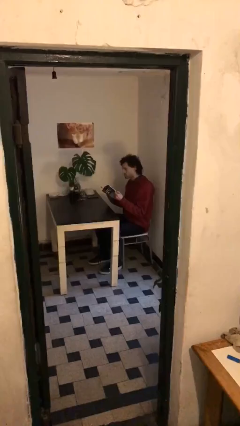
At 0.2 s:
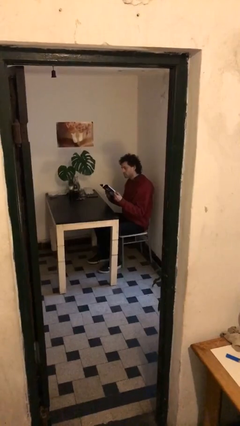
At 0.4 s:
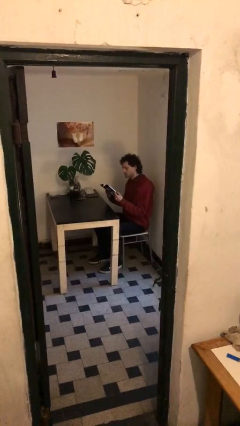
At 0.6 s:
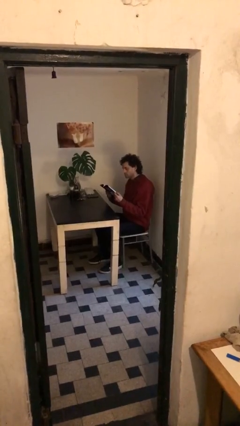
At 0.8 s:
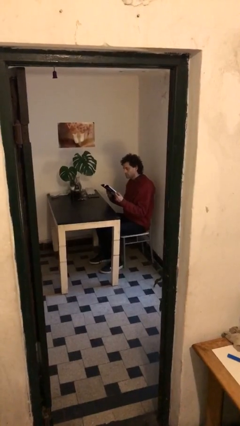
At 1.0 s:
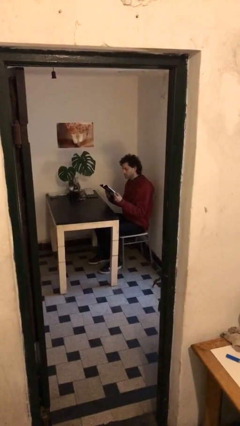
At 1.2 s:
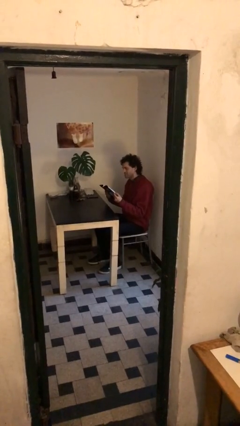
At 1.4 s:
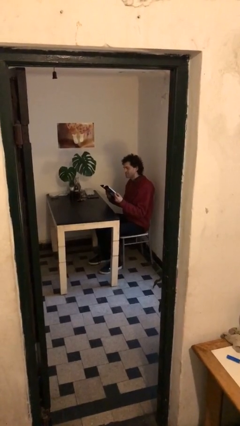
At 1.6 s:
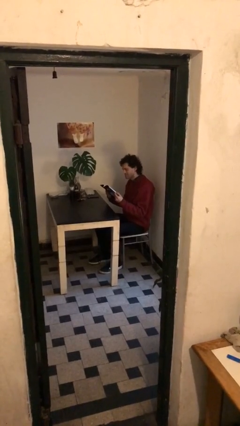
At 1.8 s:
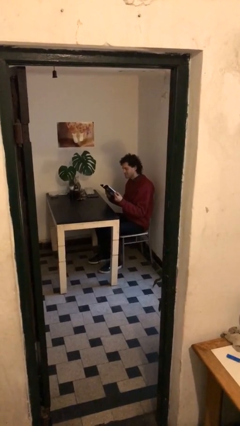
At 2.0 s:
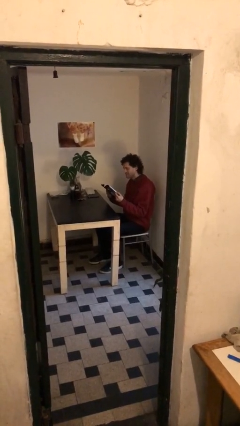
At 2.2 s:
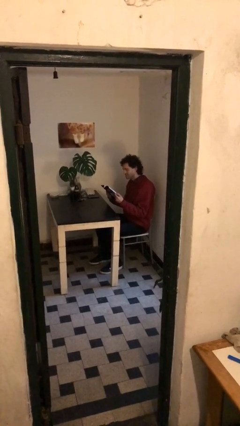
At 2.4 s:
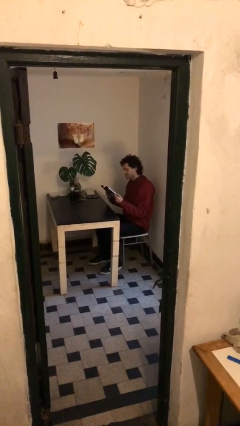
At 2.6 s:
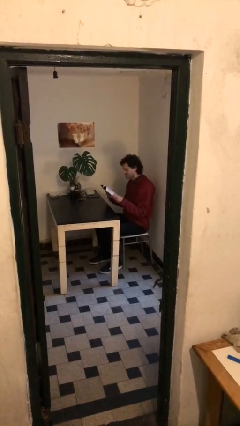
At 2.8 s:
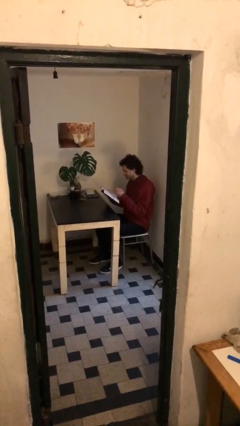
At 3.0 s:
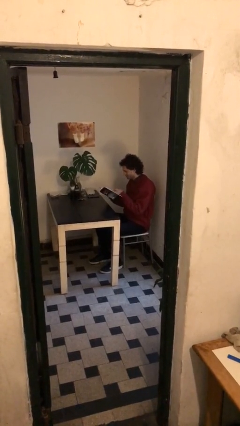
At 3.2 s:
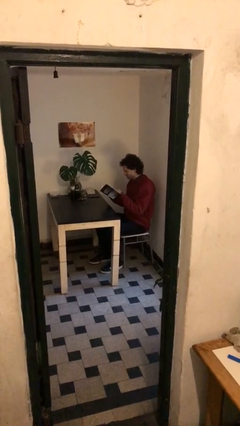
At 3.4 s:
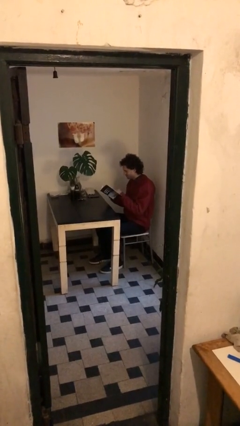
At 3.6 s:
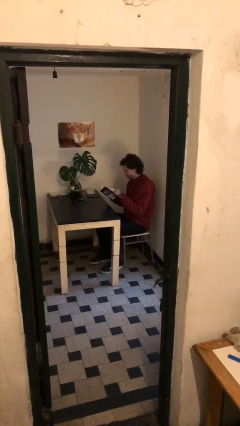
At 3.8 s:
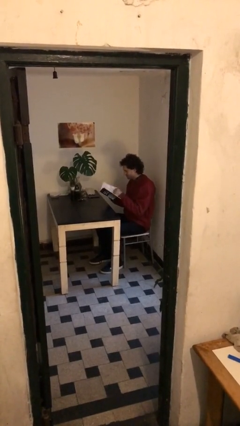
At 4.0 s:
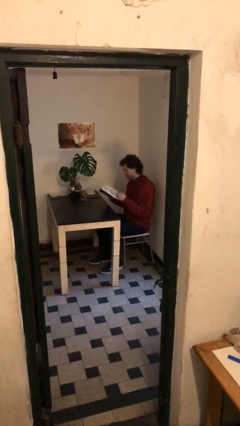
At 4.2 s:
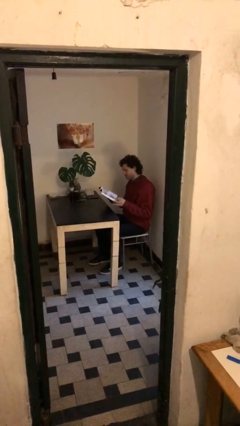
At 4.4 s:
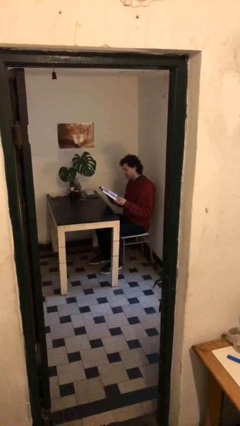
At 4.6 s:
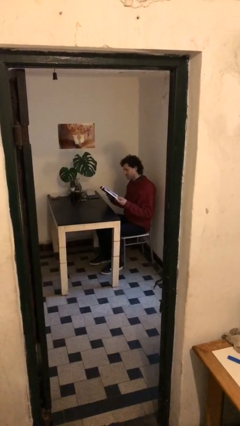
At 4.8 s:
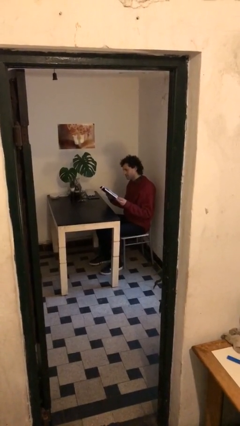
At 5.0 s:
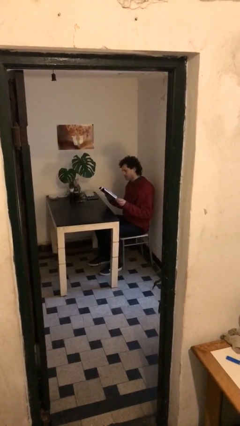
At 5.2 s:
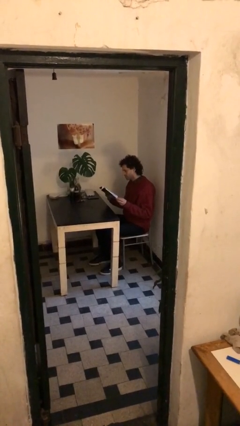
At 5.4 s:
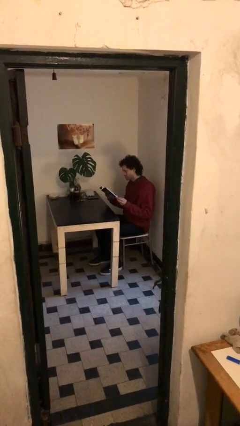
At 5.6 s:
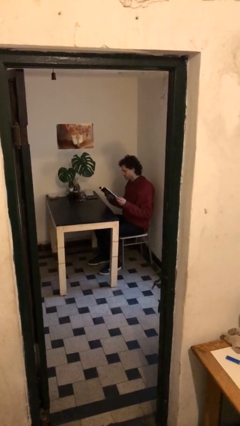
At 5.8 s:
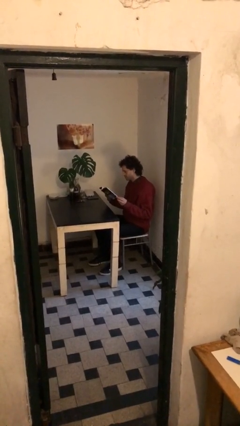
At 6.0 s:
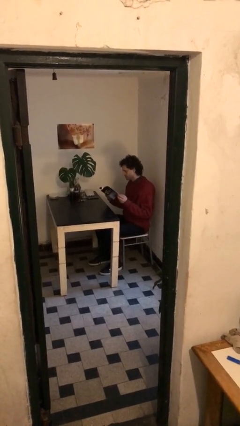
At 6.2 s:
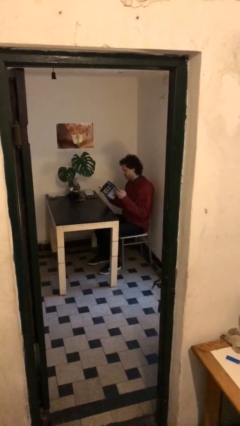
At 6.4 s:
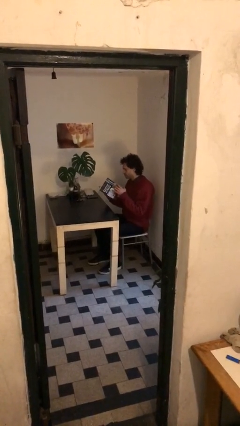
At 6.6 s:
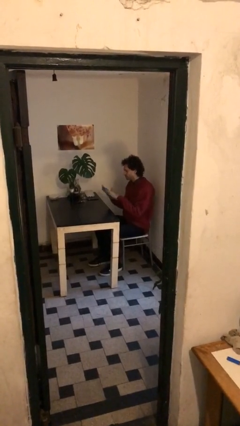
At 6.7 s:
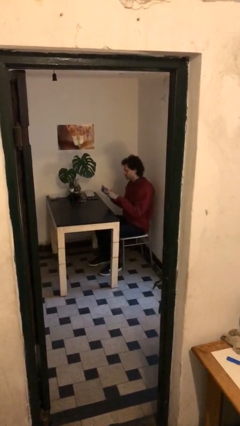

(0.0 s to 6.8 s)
person reads document

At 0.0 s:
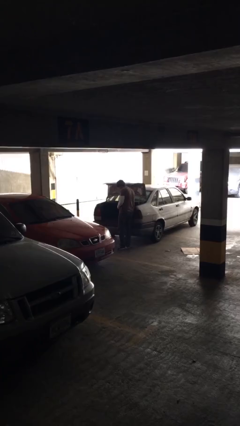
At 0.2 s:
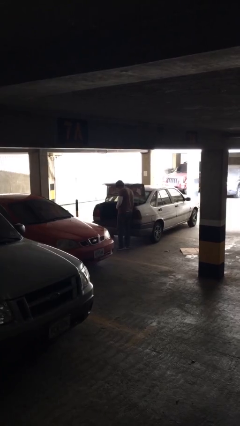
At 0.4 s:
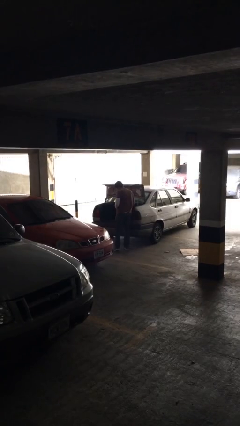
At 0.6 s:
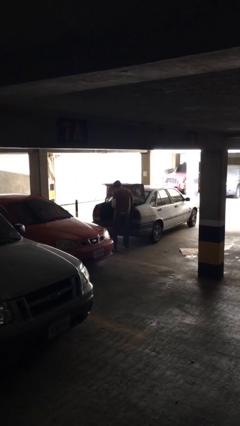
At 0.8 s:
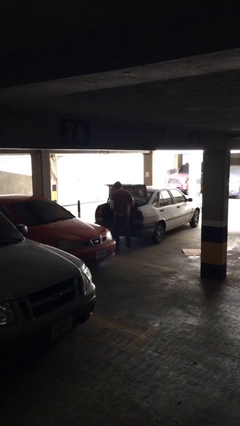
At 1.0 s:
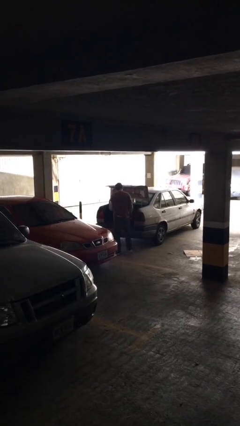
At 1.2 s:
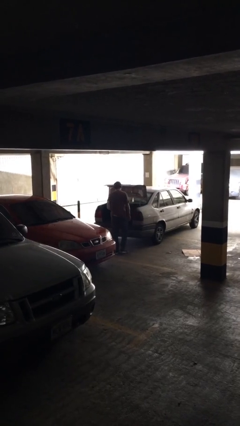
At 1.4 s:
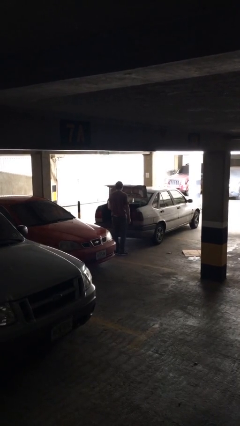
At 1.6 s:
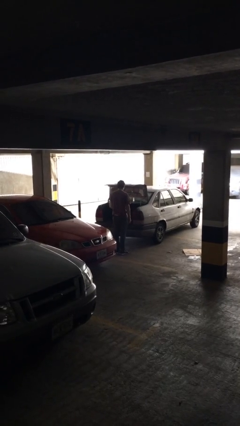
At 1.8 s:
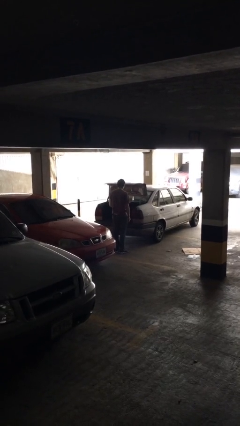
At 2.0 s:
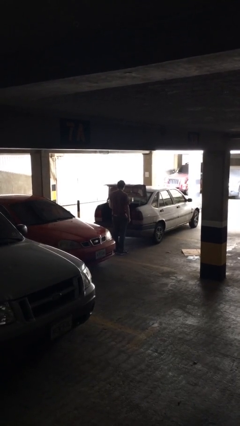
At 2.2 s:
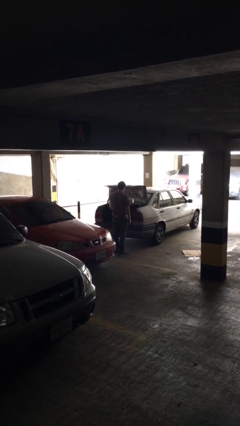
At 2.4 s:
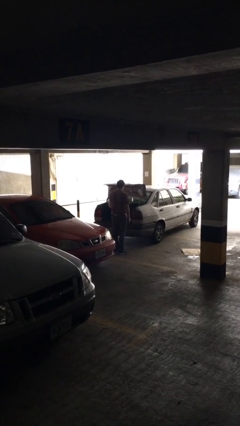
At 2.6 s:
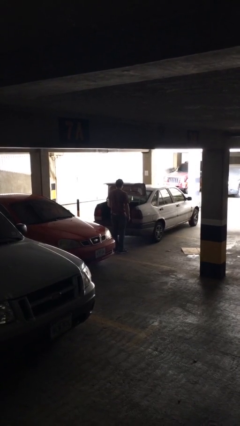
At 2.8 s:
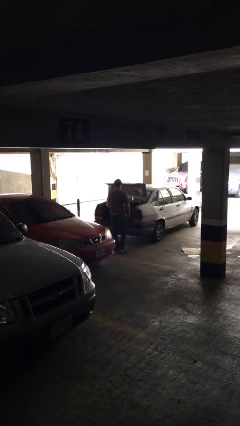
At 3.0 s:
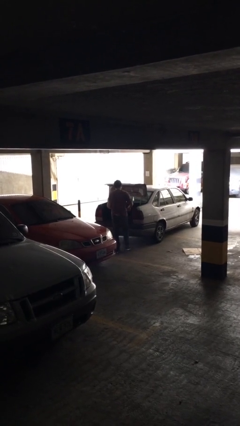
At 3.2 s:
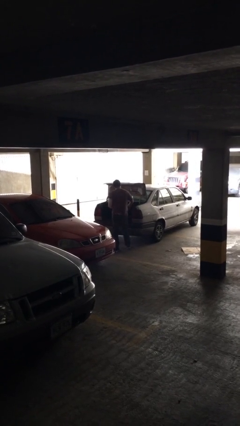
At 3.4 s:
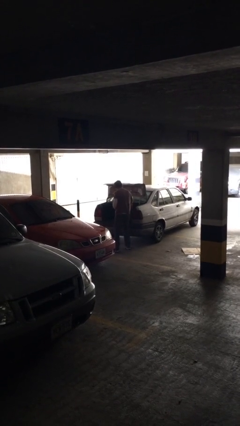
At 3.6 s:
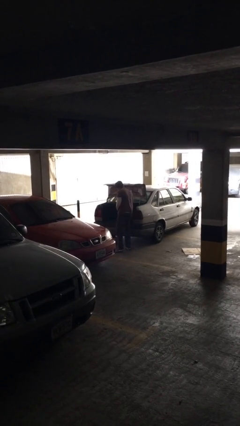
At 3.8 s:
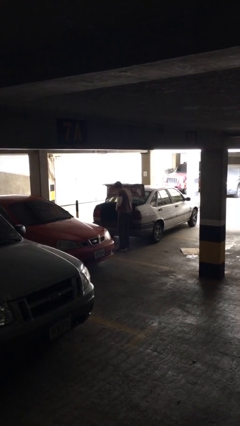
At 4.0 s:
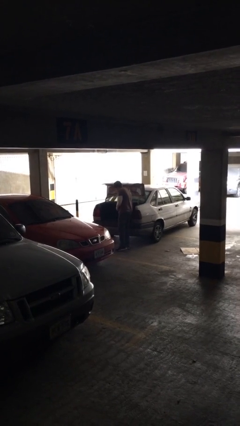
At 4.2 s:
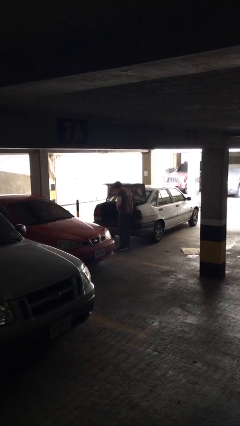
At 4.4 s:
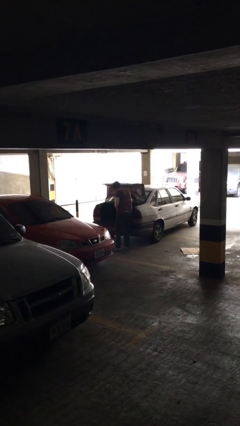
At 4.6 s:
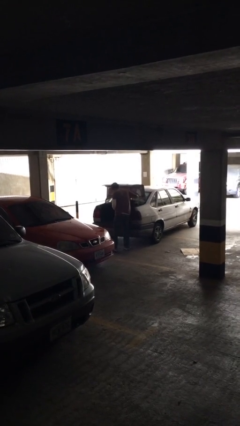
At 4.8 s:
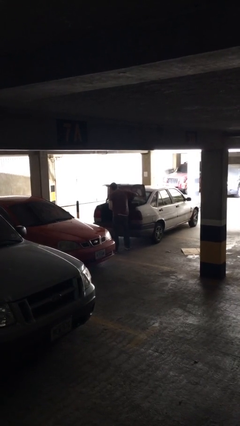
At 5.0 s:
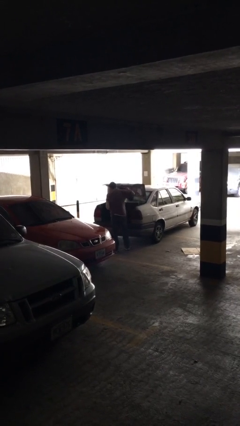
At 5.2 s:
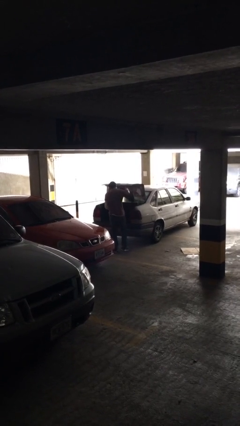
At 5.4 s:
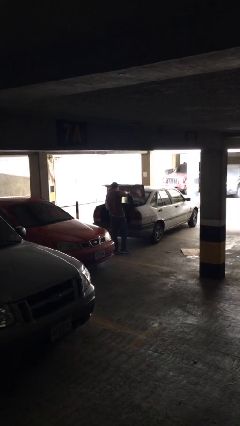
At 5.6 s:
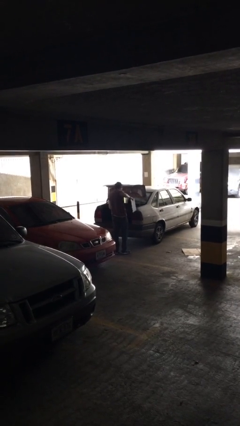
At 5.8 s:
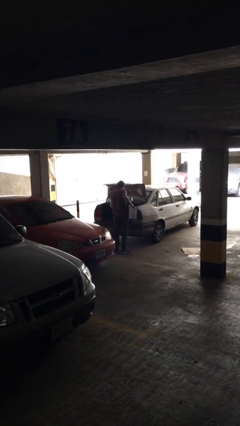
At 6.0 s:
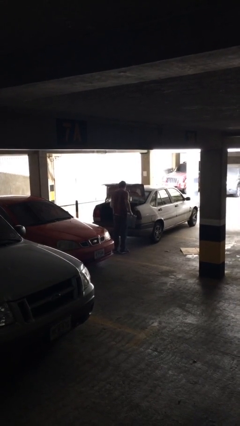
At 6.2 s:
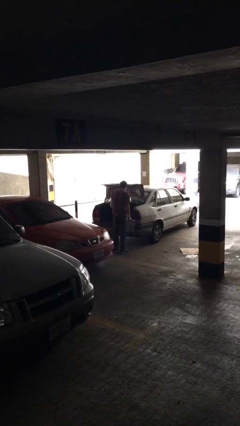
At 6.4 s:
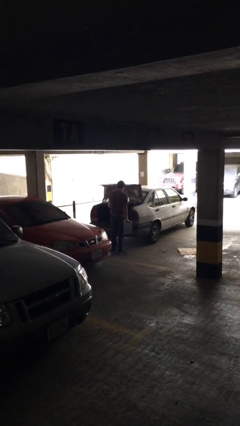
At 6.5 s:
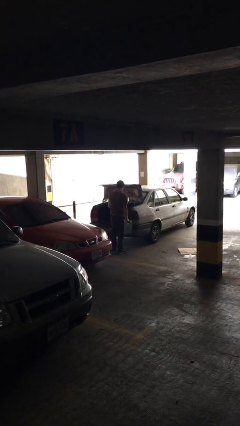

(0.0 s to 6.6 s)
person unloads car

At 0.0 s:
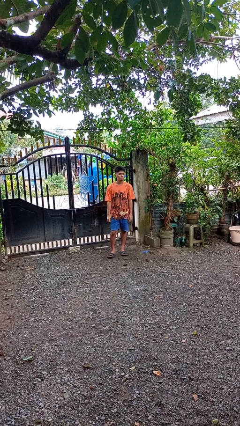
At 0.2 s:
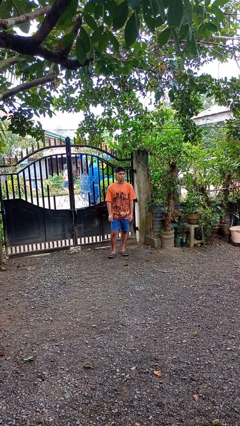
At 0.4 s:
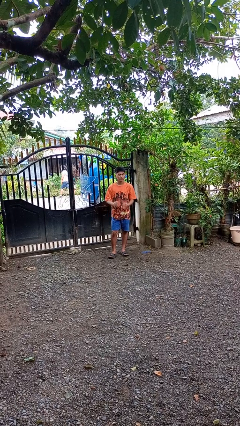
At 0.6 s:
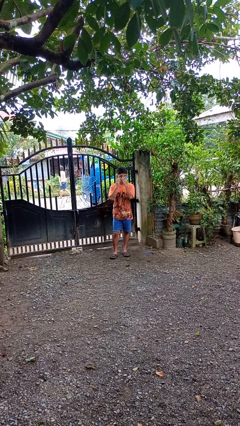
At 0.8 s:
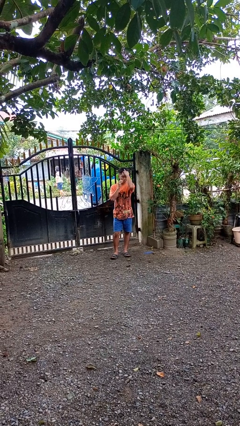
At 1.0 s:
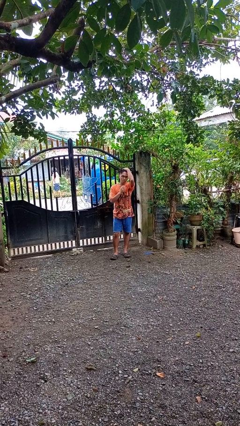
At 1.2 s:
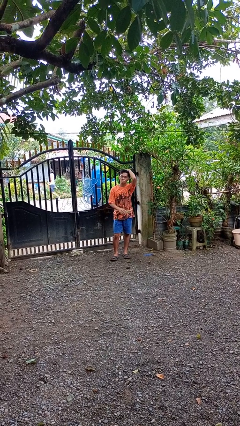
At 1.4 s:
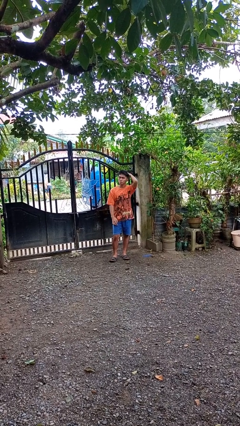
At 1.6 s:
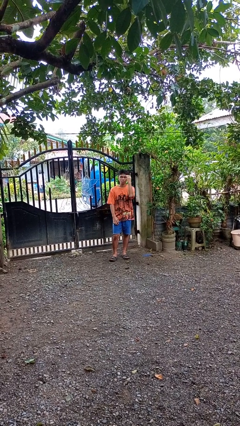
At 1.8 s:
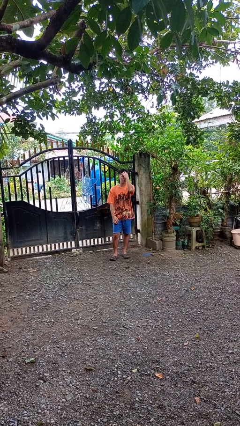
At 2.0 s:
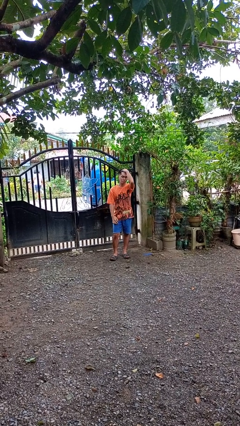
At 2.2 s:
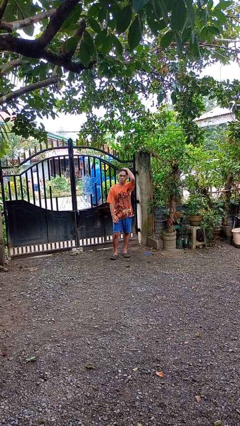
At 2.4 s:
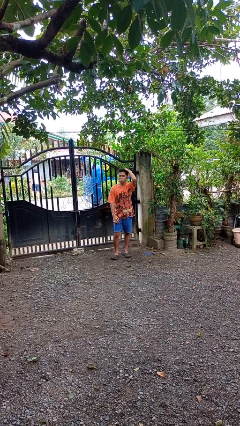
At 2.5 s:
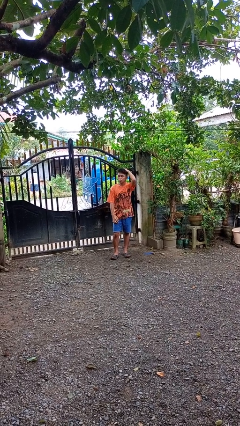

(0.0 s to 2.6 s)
person strokes hair

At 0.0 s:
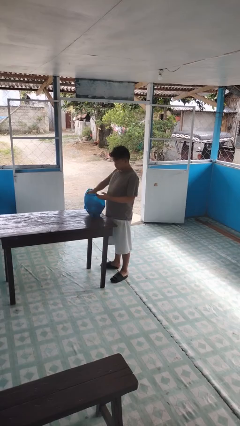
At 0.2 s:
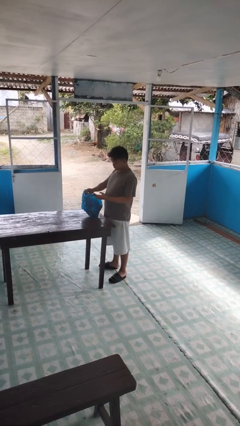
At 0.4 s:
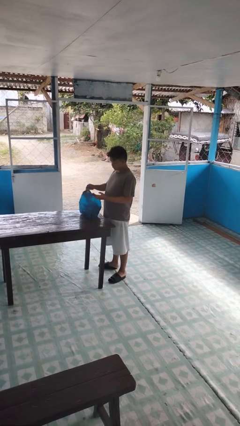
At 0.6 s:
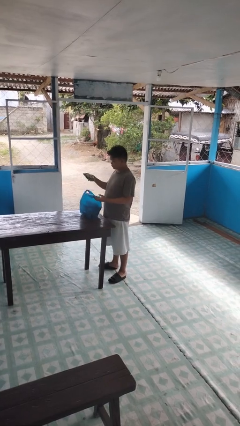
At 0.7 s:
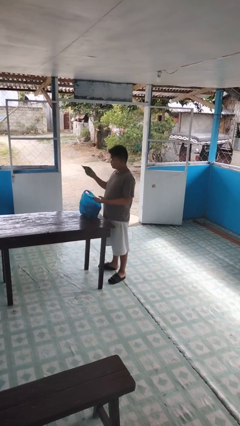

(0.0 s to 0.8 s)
person takes object from bag

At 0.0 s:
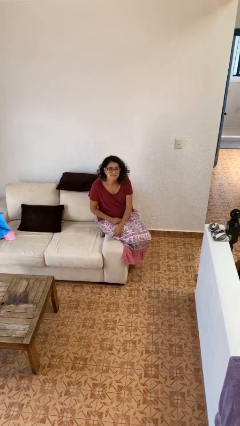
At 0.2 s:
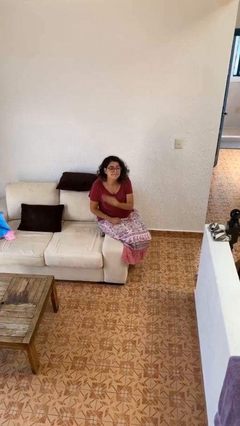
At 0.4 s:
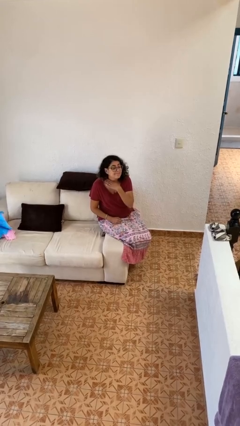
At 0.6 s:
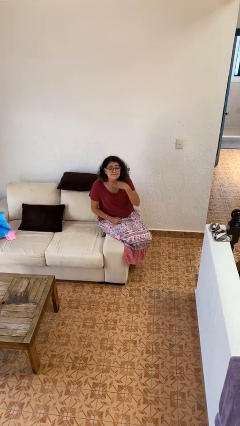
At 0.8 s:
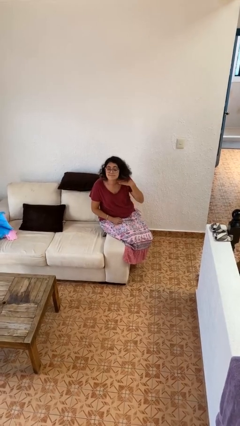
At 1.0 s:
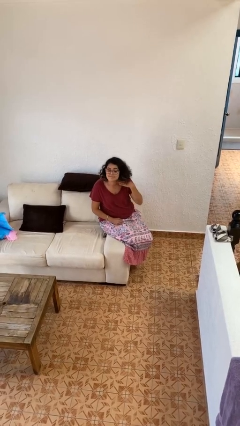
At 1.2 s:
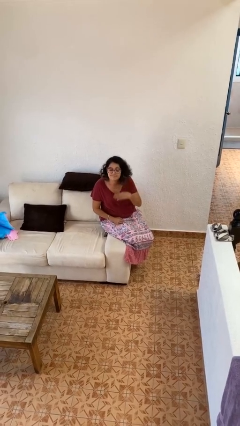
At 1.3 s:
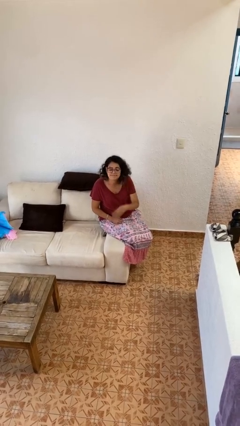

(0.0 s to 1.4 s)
person gestures cut
